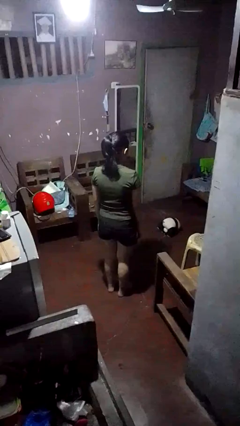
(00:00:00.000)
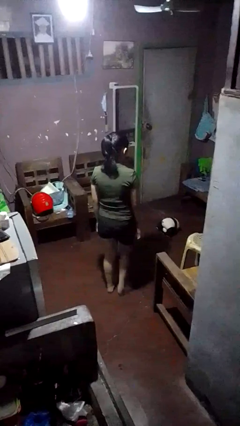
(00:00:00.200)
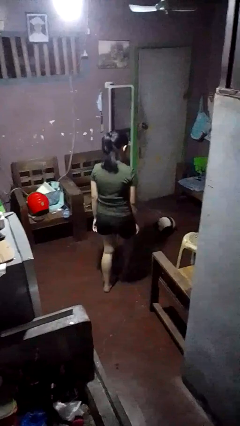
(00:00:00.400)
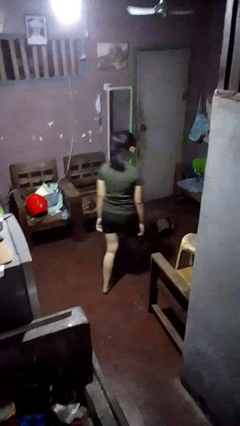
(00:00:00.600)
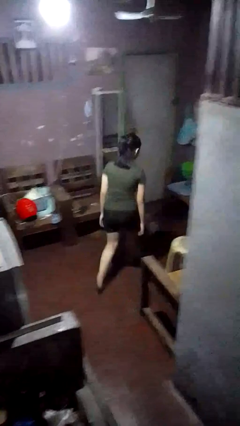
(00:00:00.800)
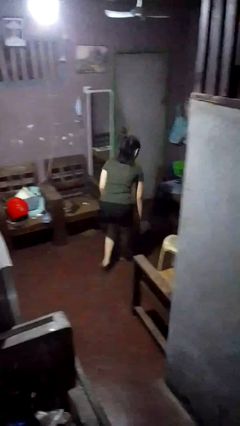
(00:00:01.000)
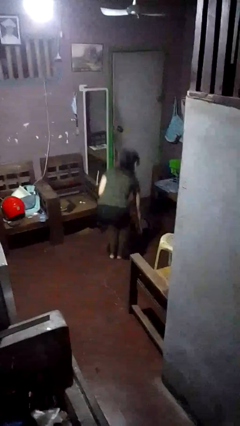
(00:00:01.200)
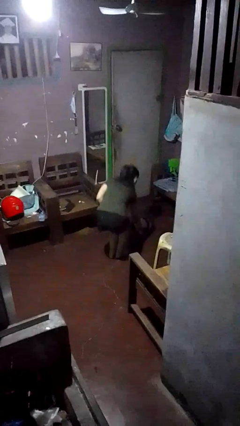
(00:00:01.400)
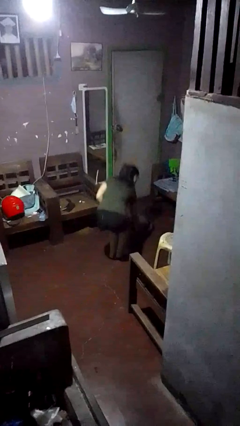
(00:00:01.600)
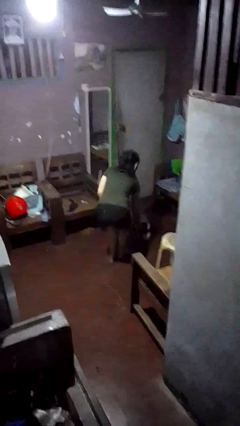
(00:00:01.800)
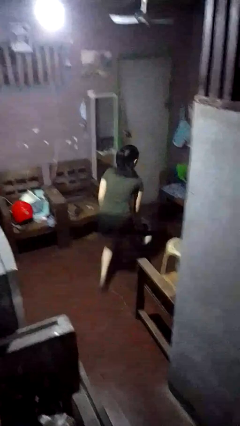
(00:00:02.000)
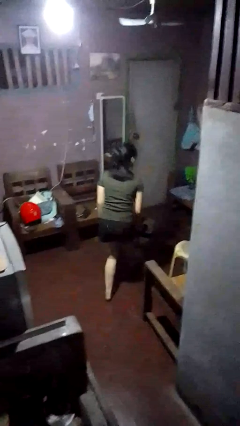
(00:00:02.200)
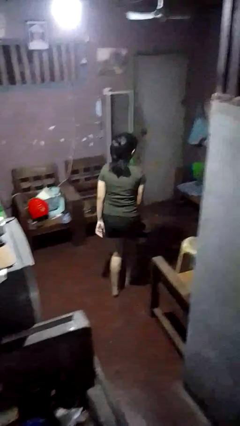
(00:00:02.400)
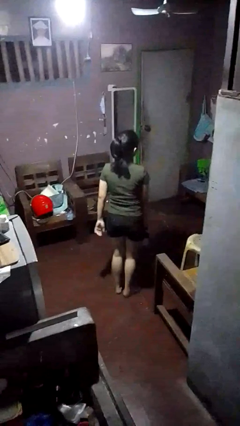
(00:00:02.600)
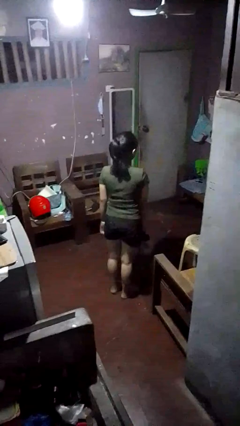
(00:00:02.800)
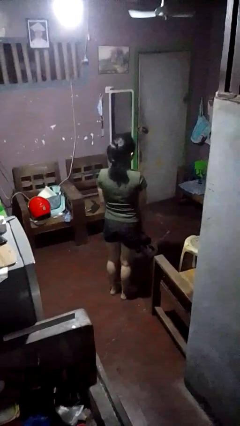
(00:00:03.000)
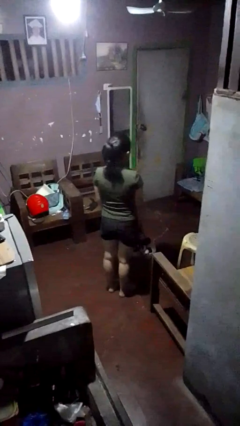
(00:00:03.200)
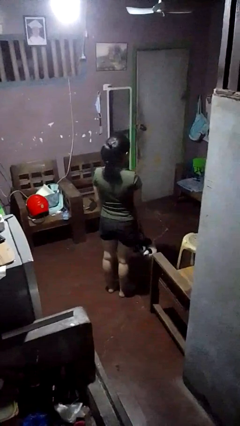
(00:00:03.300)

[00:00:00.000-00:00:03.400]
person picks up object from floor

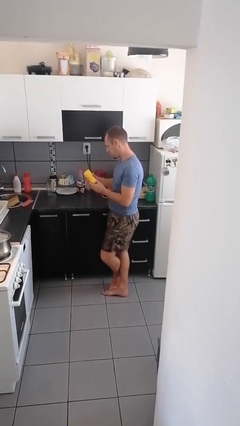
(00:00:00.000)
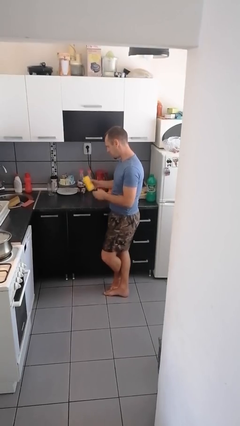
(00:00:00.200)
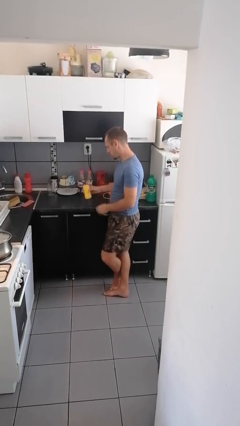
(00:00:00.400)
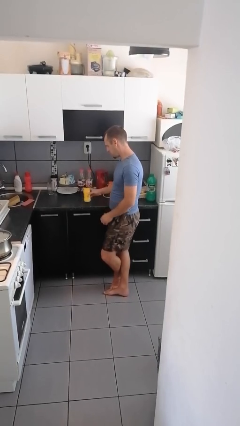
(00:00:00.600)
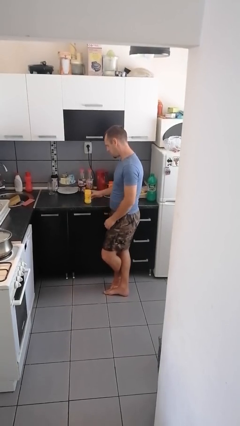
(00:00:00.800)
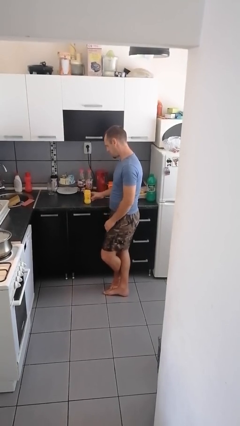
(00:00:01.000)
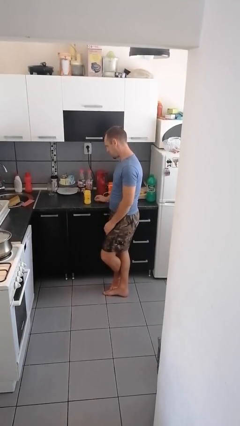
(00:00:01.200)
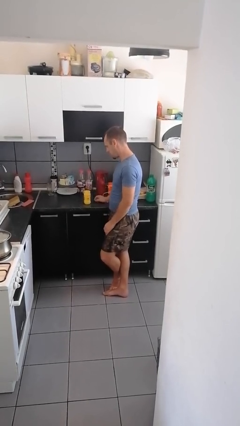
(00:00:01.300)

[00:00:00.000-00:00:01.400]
person puts down object on countertop

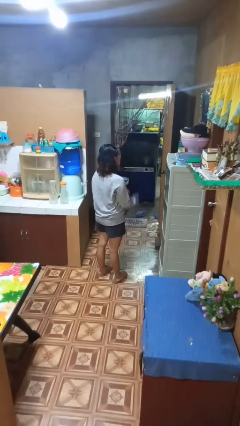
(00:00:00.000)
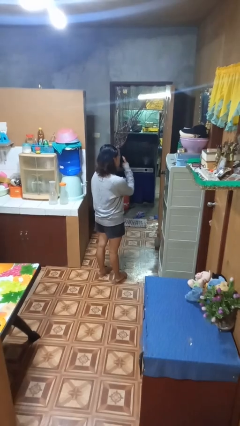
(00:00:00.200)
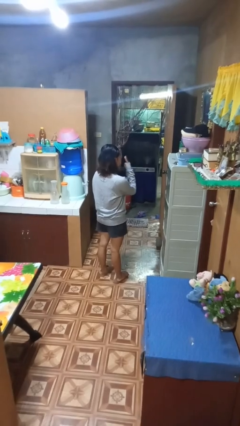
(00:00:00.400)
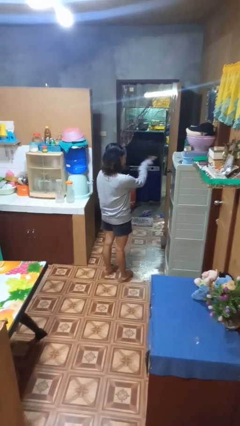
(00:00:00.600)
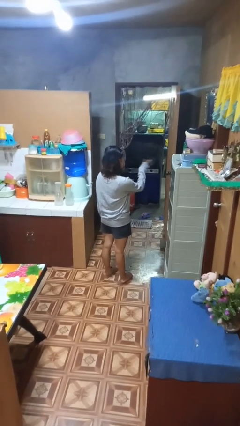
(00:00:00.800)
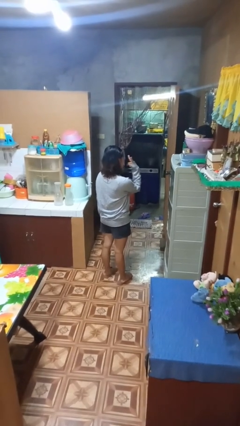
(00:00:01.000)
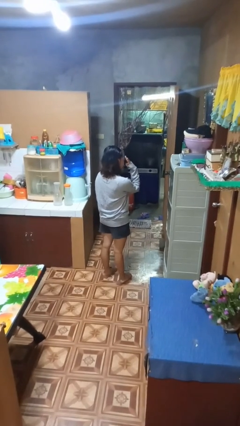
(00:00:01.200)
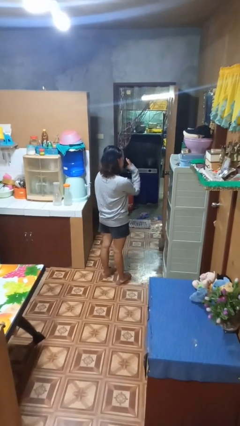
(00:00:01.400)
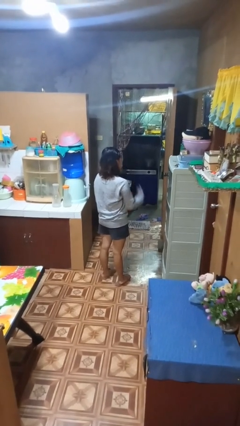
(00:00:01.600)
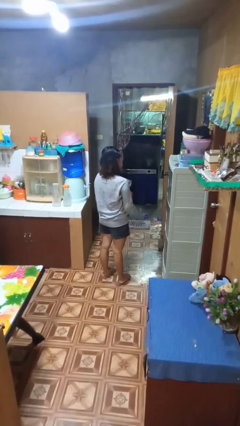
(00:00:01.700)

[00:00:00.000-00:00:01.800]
person gestures watch closely

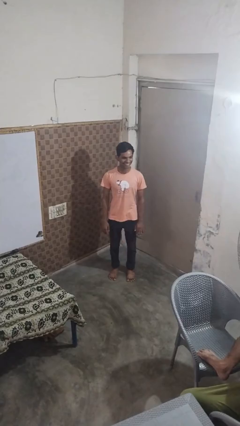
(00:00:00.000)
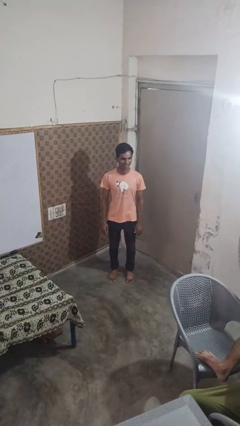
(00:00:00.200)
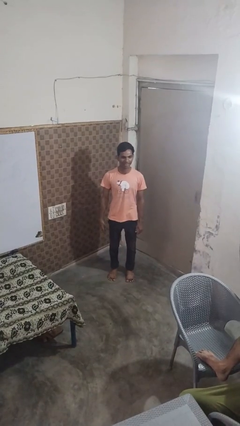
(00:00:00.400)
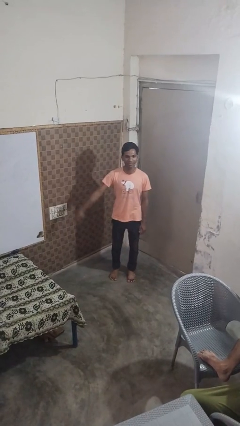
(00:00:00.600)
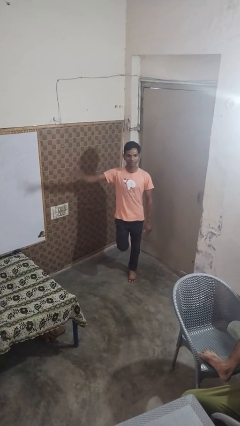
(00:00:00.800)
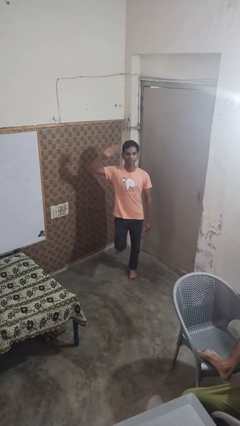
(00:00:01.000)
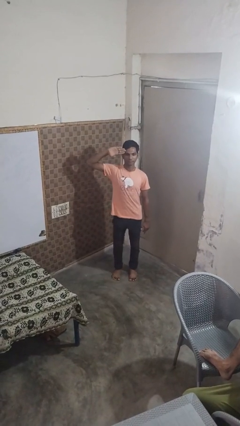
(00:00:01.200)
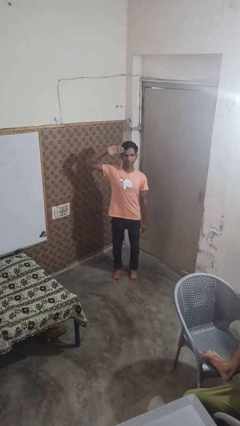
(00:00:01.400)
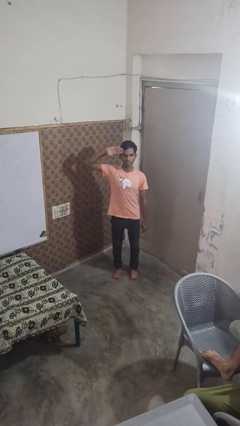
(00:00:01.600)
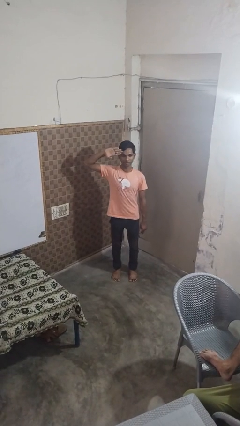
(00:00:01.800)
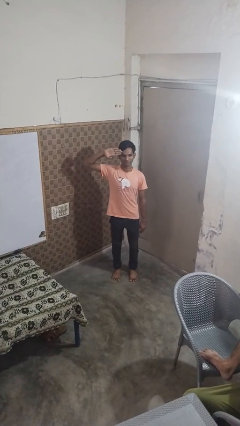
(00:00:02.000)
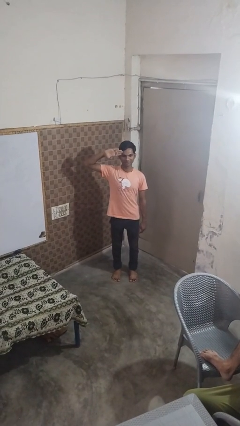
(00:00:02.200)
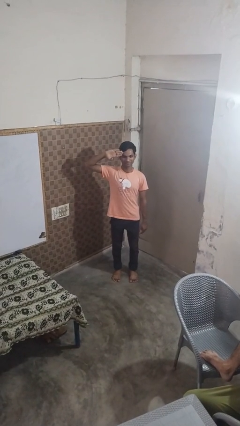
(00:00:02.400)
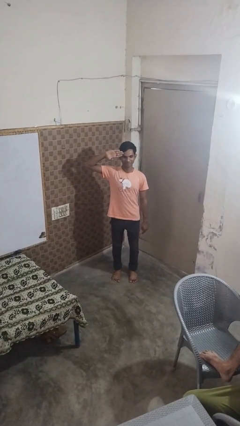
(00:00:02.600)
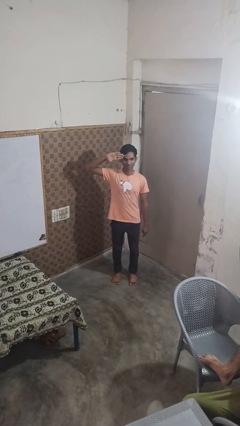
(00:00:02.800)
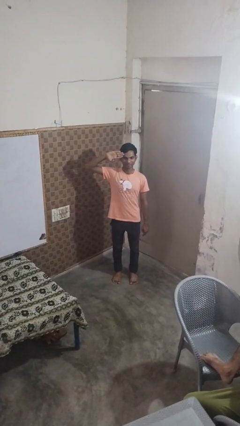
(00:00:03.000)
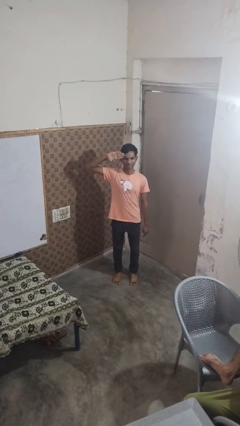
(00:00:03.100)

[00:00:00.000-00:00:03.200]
person salutes

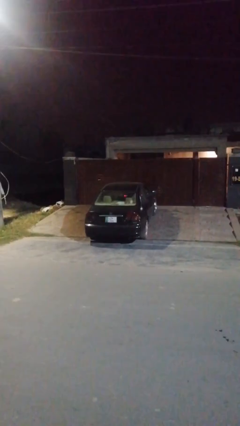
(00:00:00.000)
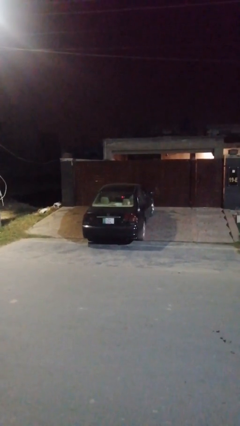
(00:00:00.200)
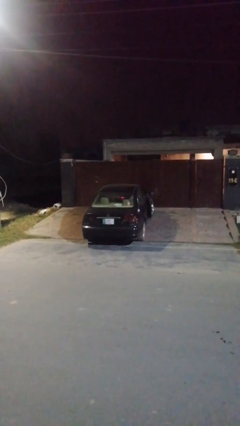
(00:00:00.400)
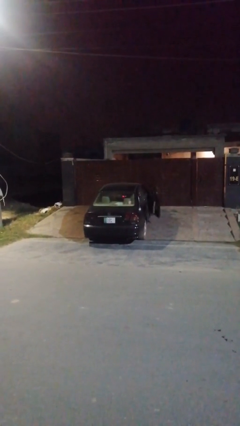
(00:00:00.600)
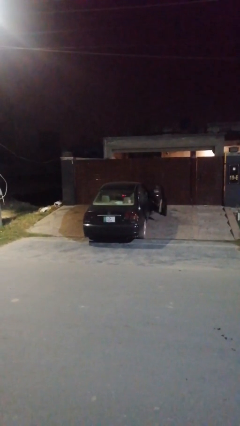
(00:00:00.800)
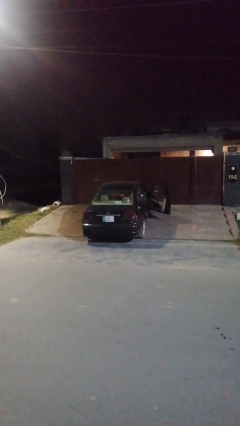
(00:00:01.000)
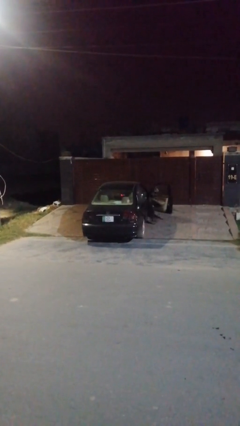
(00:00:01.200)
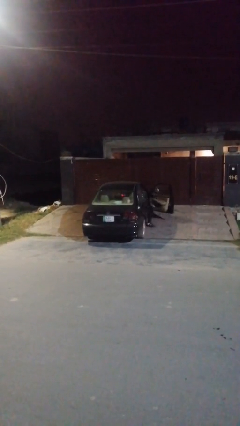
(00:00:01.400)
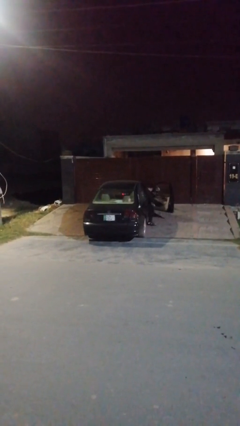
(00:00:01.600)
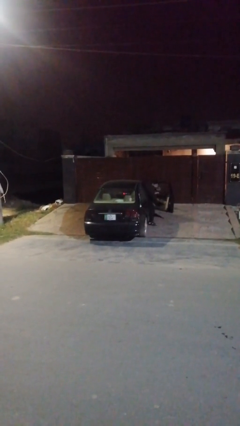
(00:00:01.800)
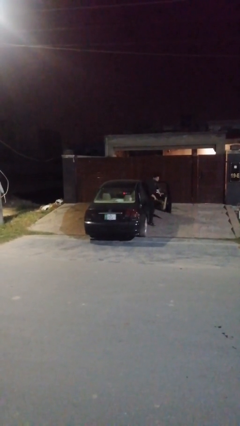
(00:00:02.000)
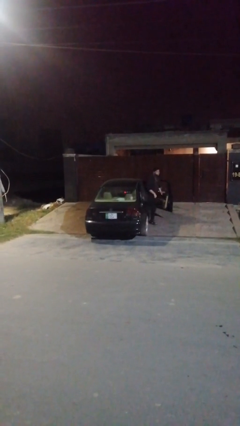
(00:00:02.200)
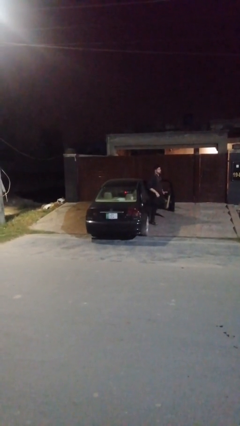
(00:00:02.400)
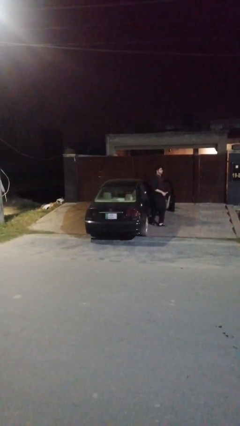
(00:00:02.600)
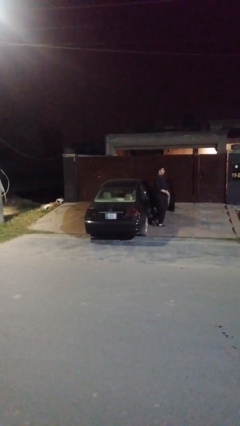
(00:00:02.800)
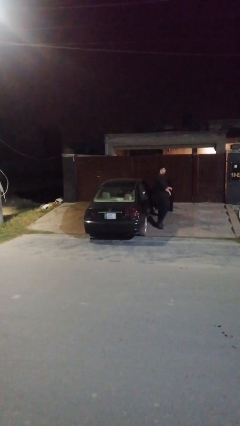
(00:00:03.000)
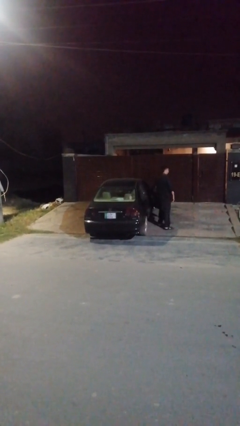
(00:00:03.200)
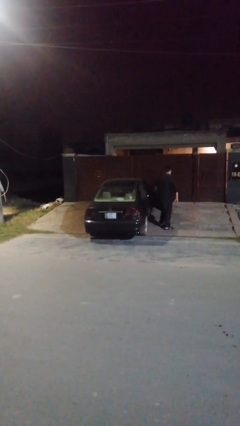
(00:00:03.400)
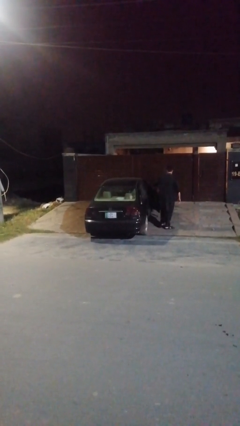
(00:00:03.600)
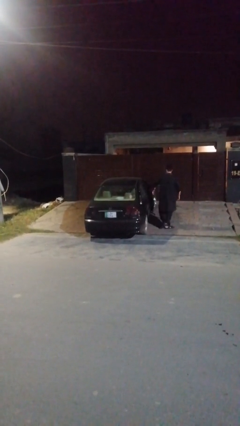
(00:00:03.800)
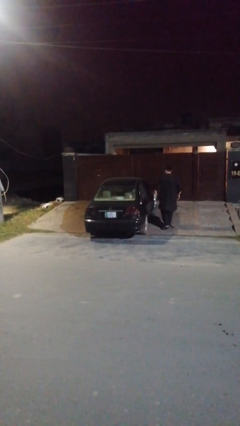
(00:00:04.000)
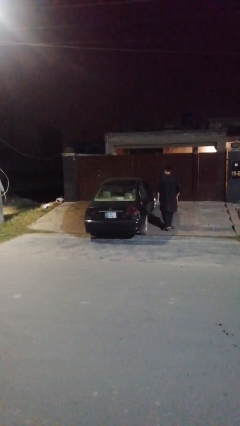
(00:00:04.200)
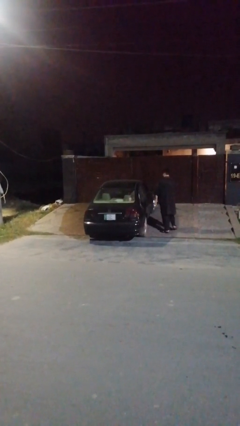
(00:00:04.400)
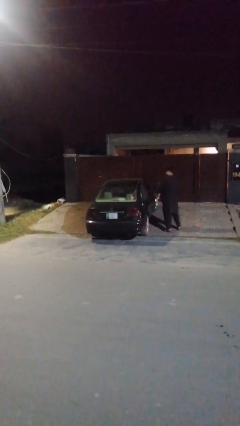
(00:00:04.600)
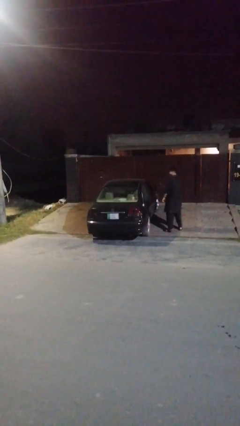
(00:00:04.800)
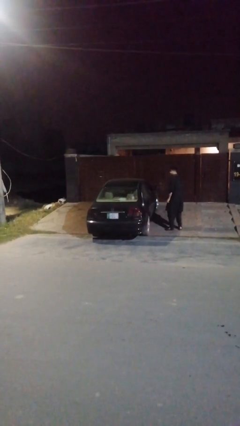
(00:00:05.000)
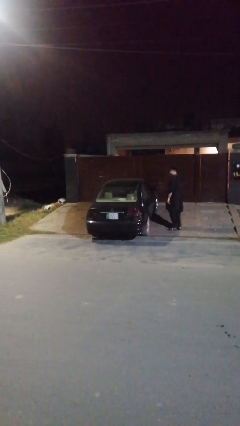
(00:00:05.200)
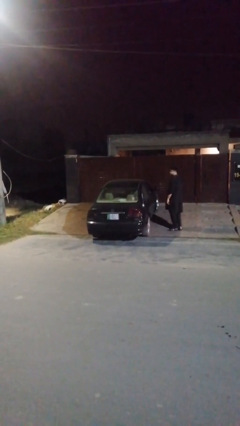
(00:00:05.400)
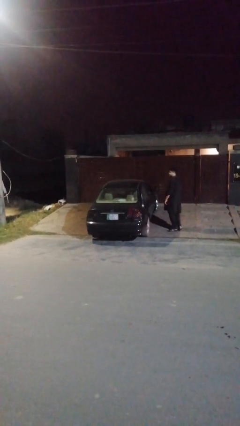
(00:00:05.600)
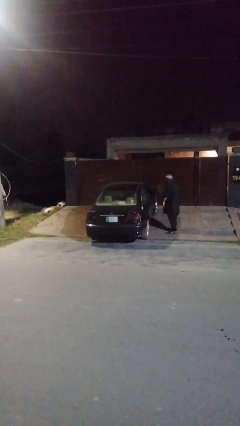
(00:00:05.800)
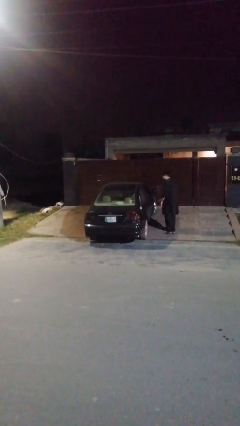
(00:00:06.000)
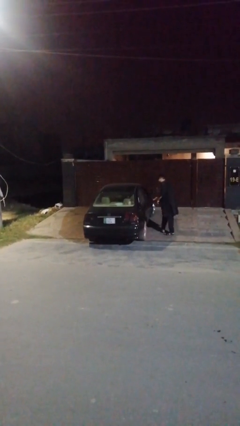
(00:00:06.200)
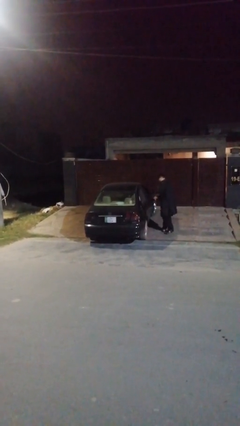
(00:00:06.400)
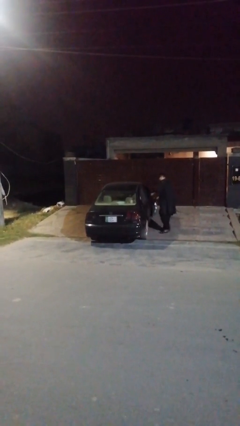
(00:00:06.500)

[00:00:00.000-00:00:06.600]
car drops off person

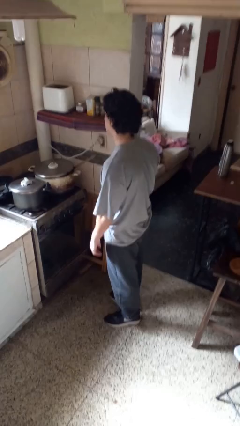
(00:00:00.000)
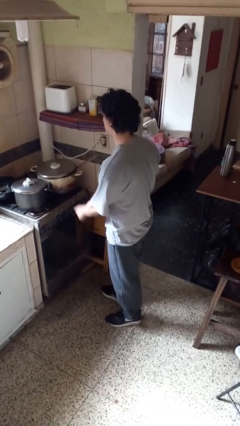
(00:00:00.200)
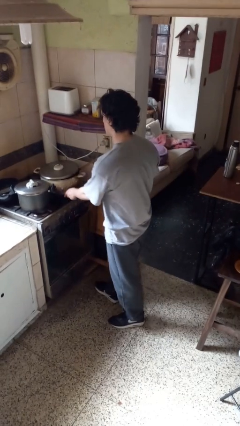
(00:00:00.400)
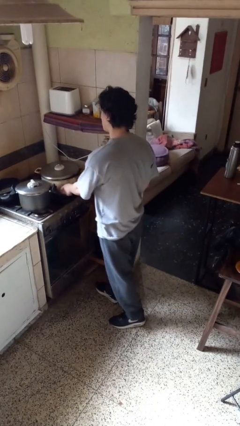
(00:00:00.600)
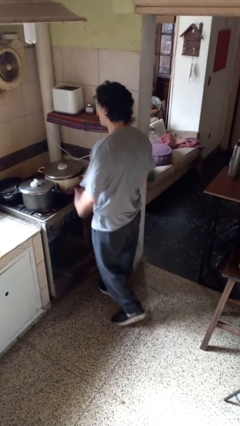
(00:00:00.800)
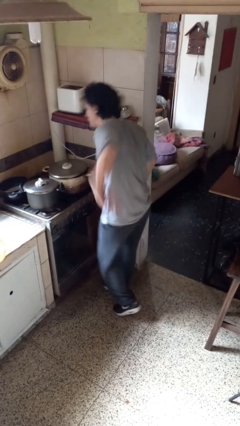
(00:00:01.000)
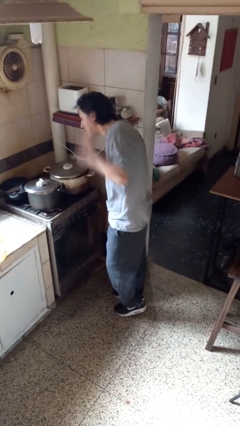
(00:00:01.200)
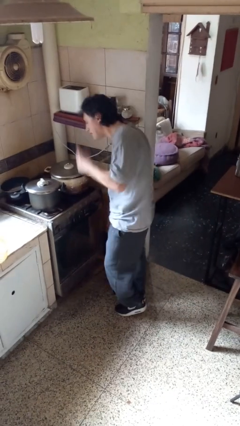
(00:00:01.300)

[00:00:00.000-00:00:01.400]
person burns hand
